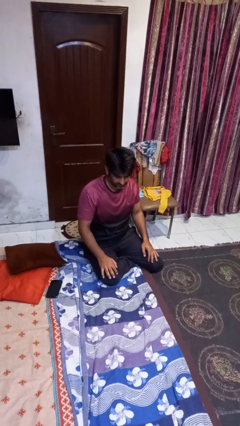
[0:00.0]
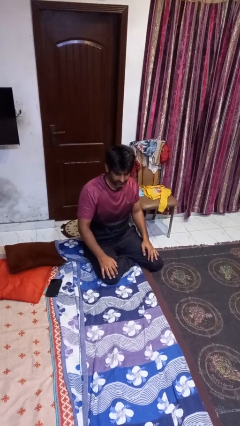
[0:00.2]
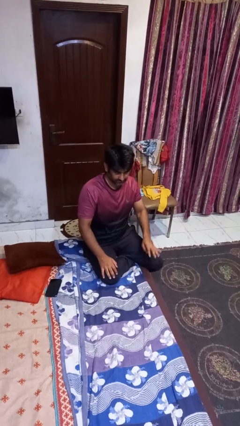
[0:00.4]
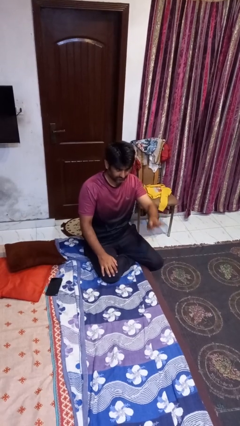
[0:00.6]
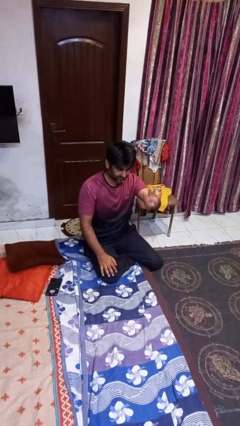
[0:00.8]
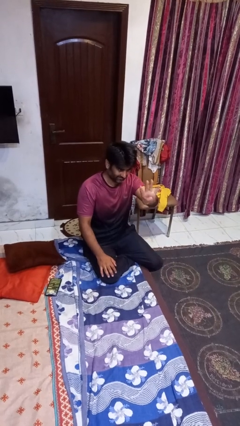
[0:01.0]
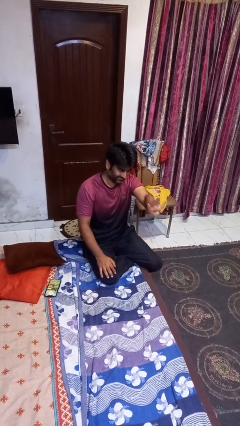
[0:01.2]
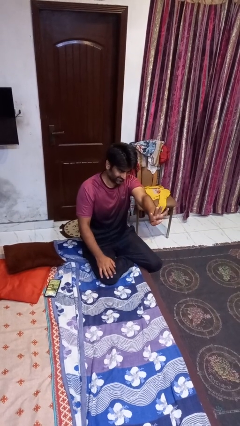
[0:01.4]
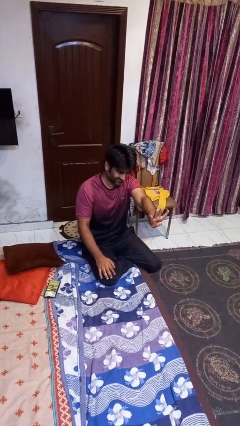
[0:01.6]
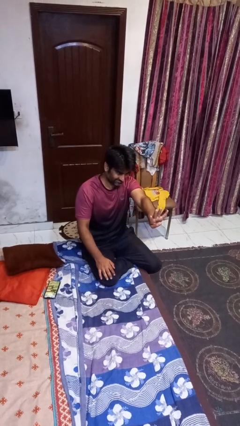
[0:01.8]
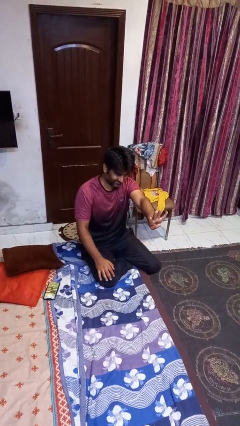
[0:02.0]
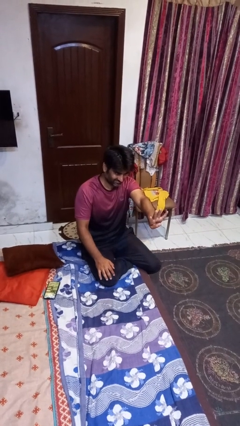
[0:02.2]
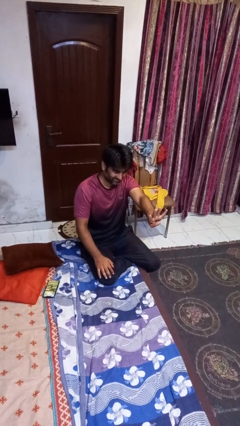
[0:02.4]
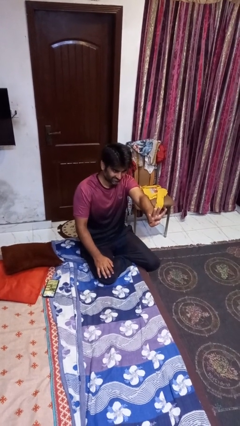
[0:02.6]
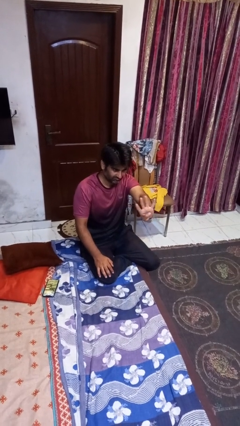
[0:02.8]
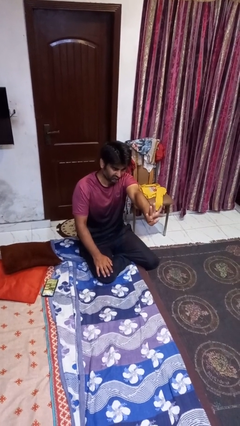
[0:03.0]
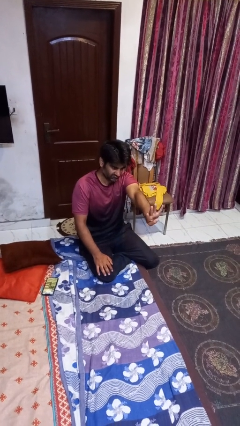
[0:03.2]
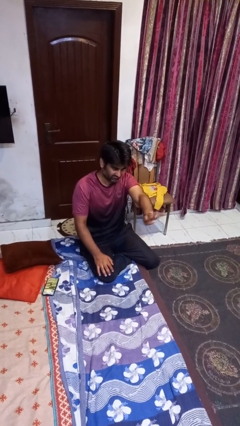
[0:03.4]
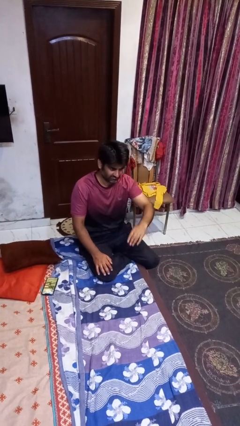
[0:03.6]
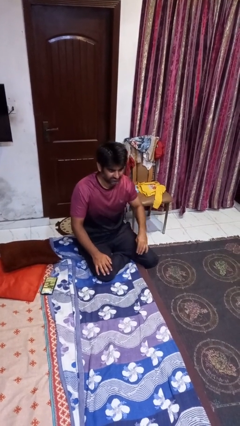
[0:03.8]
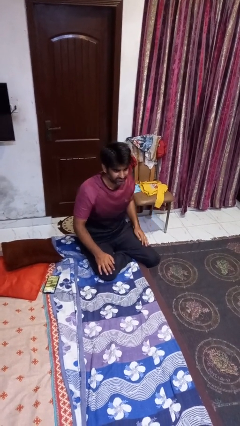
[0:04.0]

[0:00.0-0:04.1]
person gestures number four

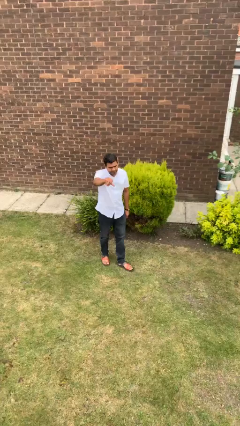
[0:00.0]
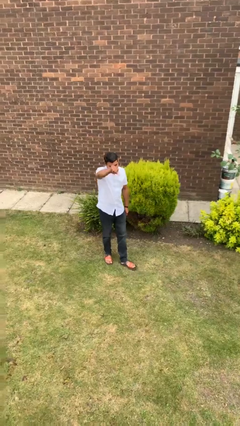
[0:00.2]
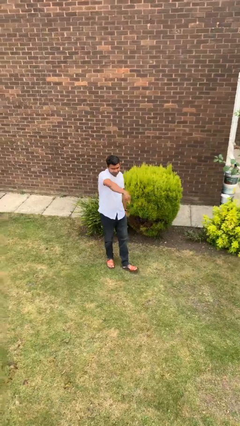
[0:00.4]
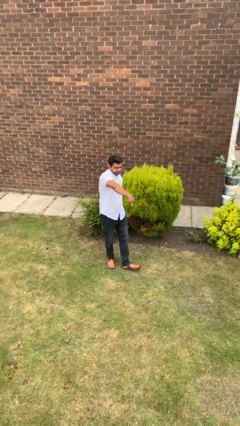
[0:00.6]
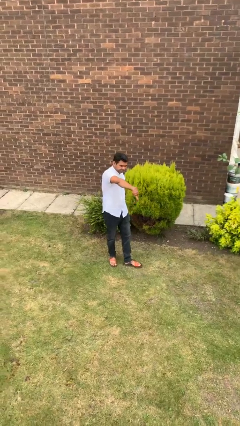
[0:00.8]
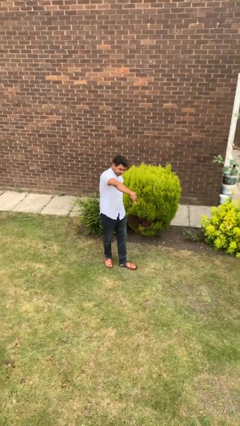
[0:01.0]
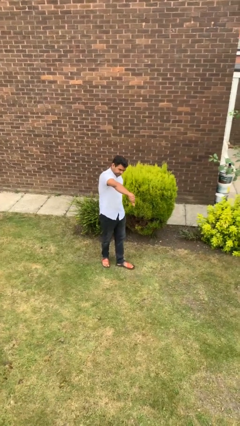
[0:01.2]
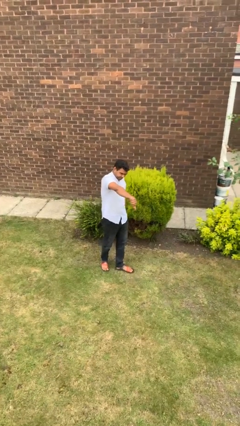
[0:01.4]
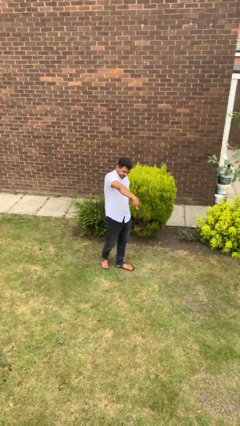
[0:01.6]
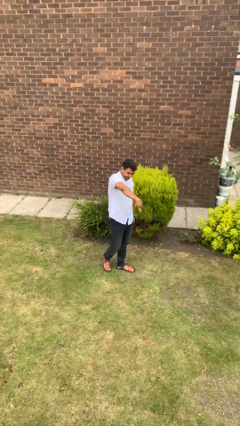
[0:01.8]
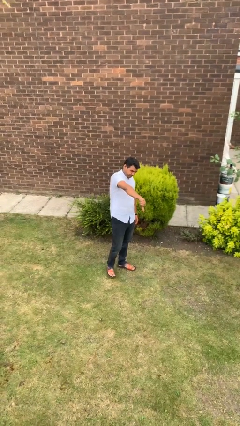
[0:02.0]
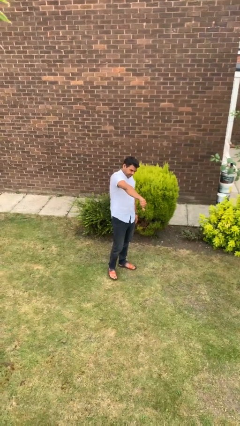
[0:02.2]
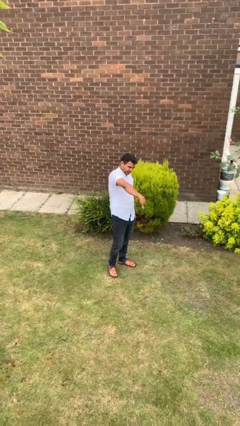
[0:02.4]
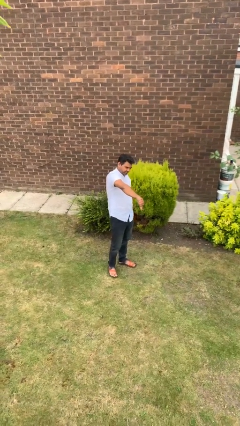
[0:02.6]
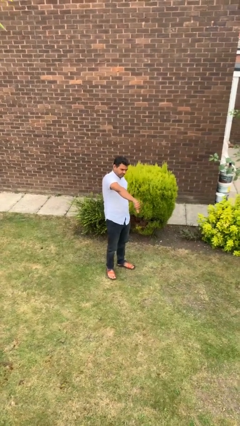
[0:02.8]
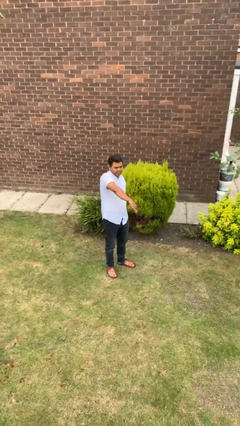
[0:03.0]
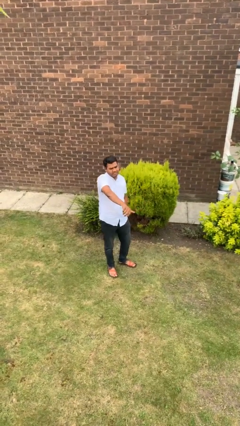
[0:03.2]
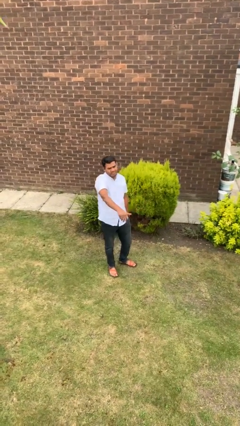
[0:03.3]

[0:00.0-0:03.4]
person gestures thumbs down

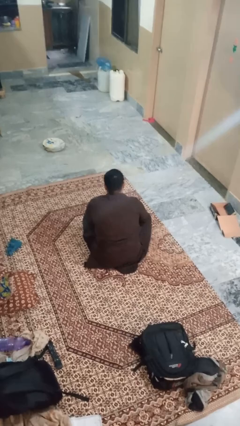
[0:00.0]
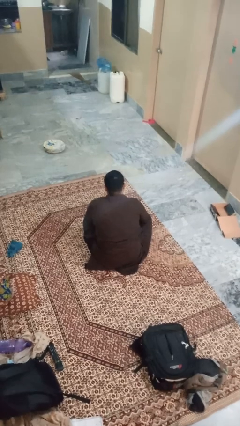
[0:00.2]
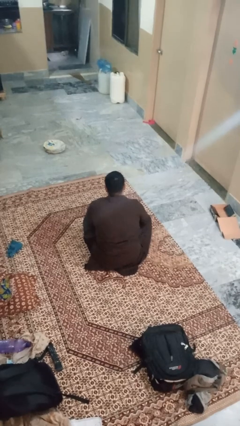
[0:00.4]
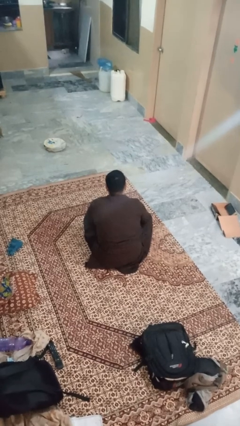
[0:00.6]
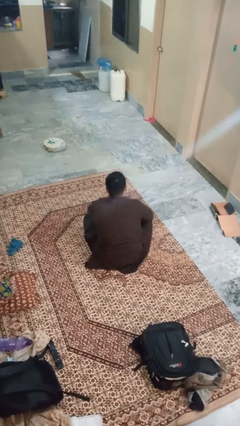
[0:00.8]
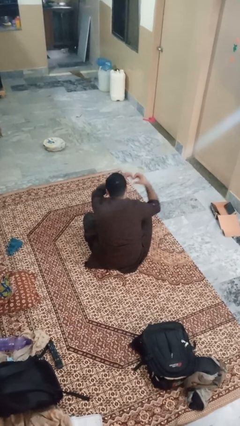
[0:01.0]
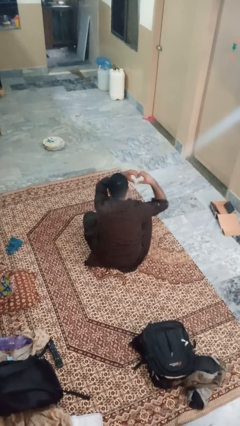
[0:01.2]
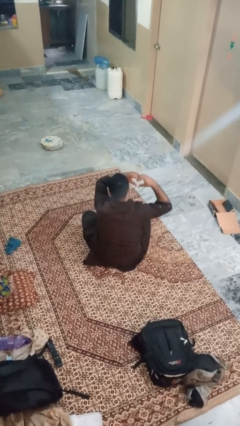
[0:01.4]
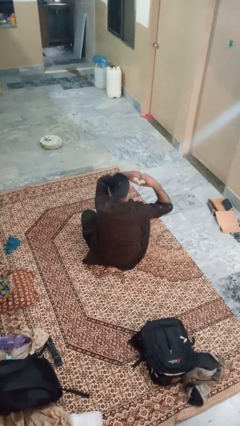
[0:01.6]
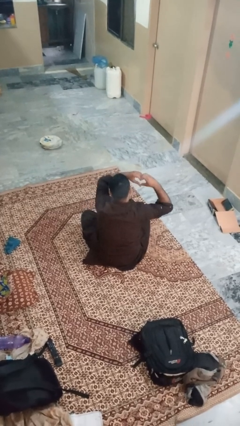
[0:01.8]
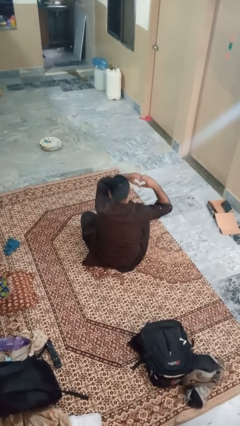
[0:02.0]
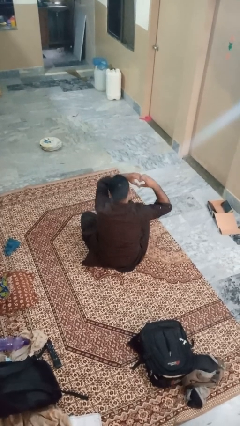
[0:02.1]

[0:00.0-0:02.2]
person gestures heart

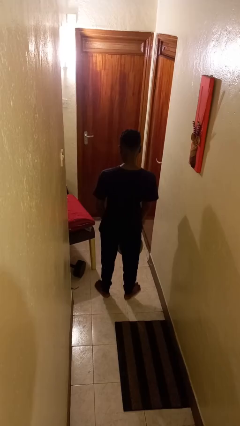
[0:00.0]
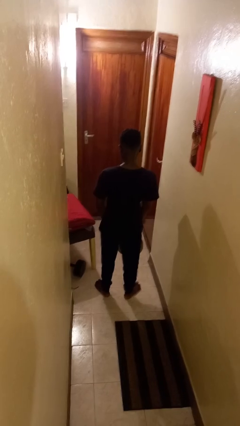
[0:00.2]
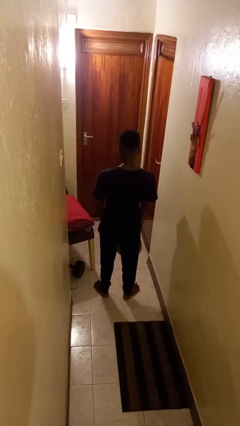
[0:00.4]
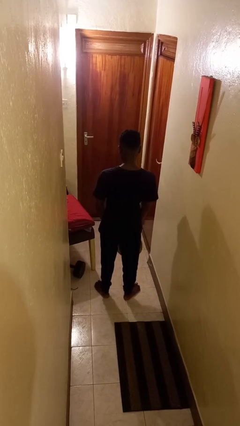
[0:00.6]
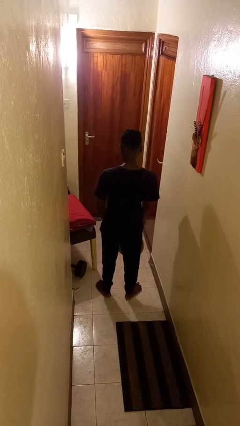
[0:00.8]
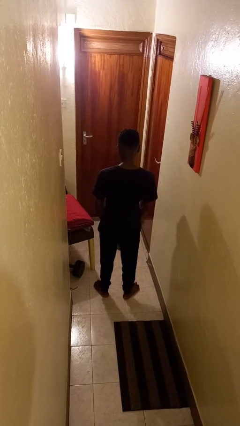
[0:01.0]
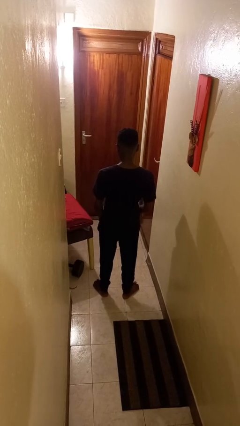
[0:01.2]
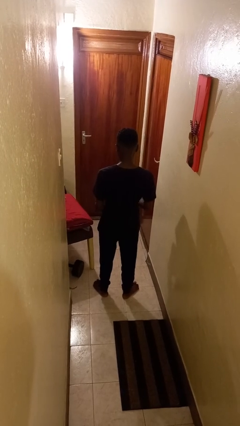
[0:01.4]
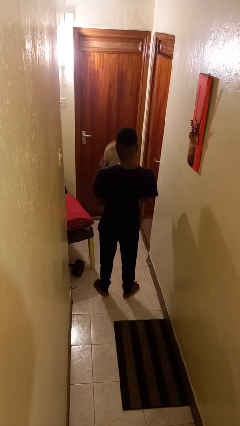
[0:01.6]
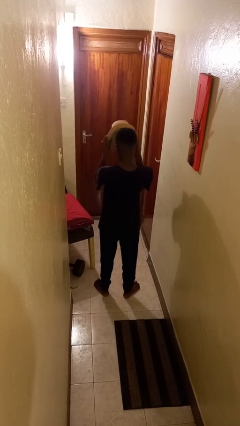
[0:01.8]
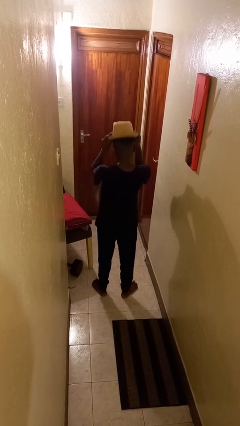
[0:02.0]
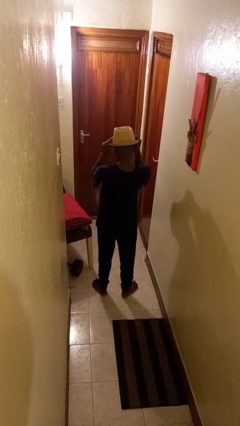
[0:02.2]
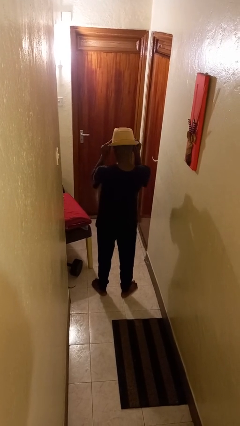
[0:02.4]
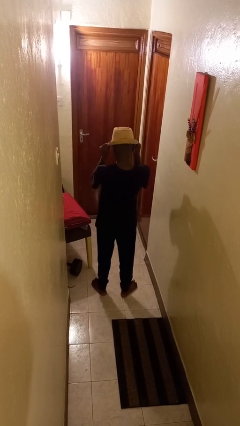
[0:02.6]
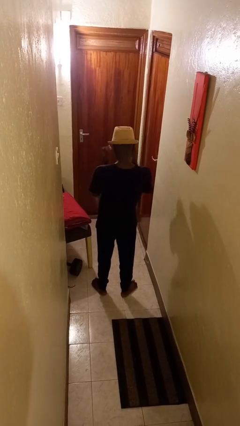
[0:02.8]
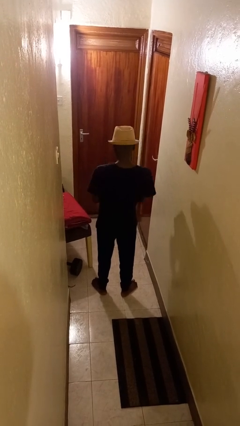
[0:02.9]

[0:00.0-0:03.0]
person puts on hat

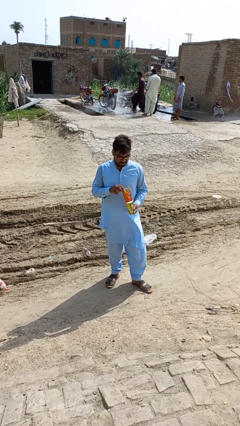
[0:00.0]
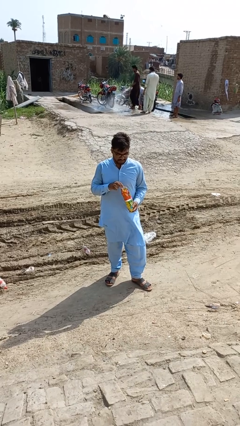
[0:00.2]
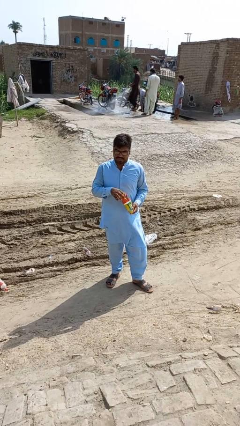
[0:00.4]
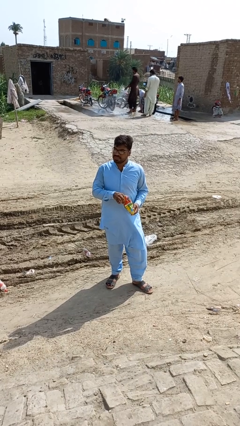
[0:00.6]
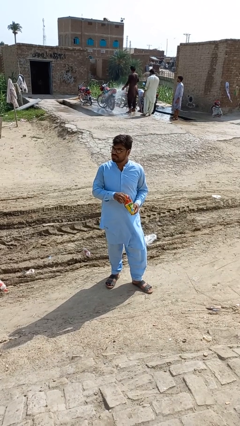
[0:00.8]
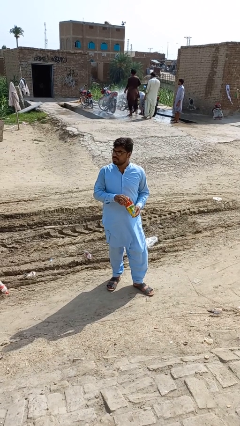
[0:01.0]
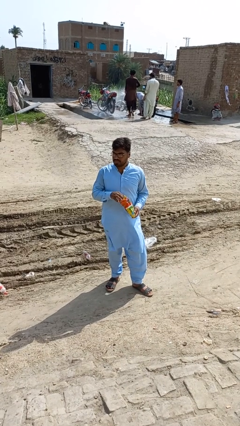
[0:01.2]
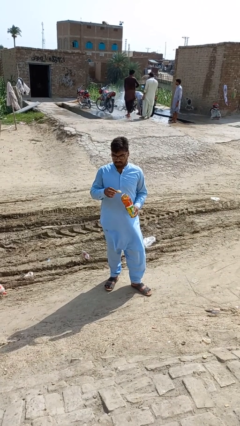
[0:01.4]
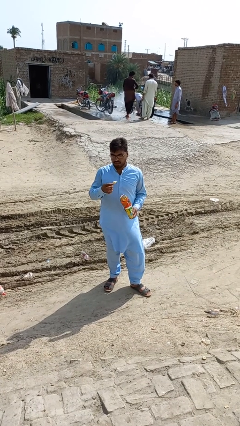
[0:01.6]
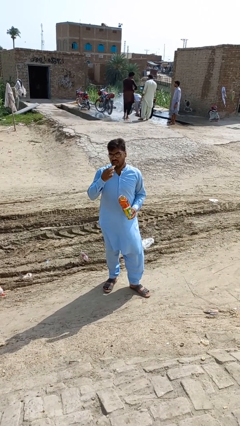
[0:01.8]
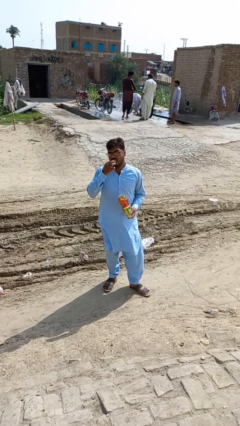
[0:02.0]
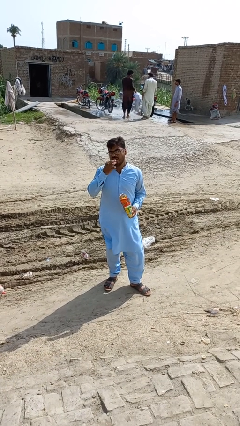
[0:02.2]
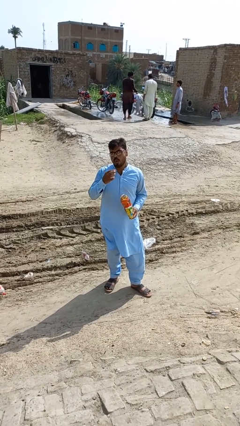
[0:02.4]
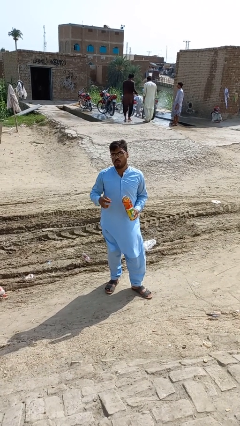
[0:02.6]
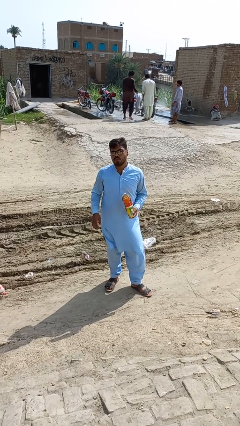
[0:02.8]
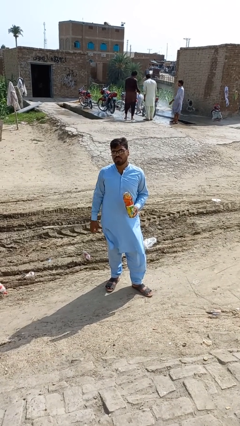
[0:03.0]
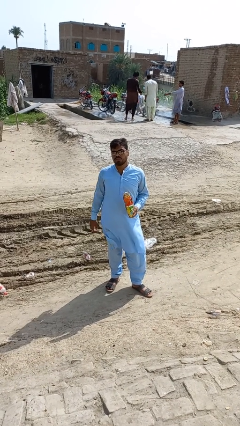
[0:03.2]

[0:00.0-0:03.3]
person eats snack from bag

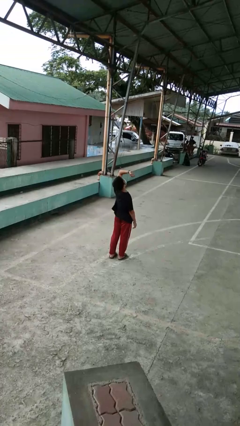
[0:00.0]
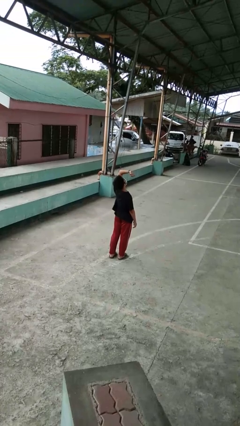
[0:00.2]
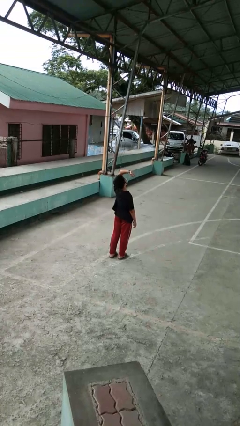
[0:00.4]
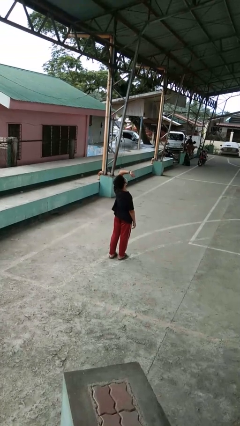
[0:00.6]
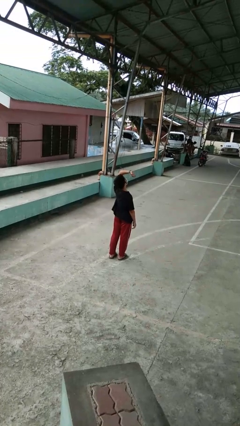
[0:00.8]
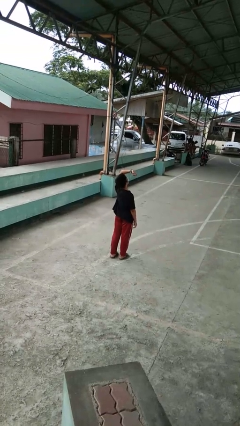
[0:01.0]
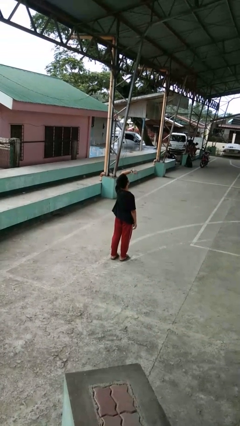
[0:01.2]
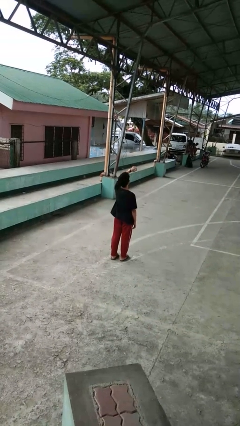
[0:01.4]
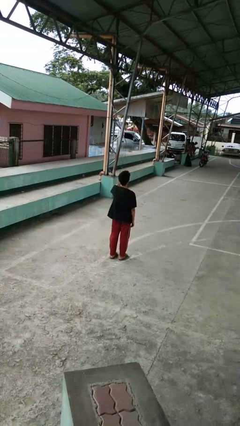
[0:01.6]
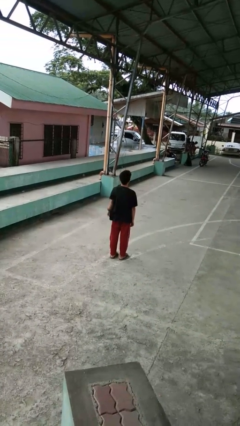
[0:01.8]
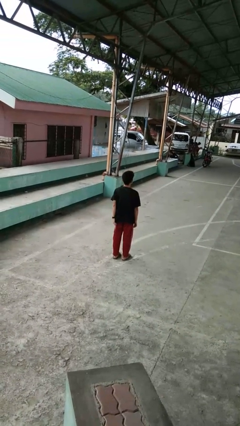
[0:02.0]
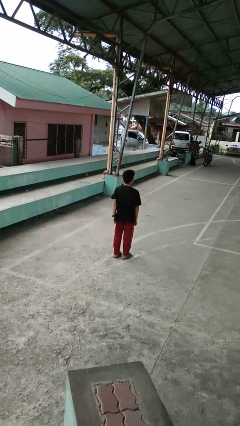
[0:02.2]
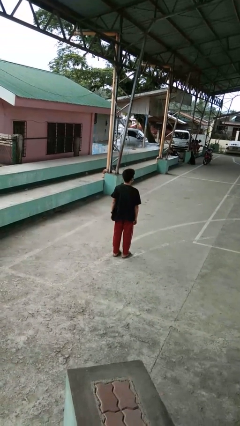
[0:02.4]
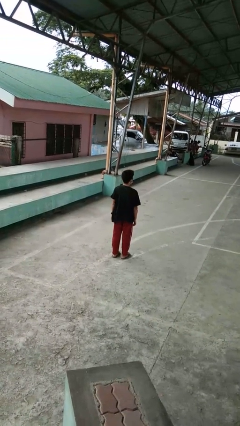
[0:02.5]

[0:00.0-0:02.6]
person looks at wristwatch
